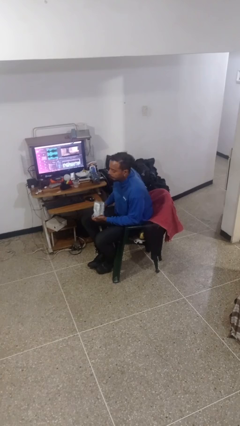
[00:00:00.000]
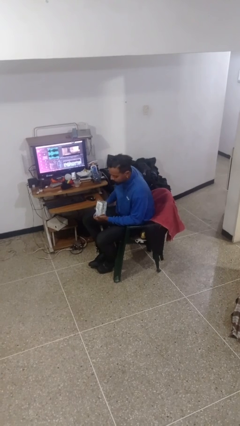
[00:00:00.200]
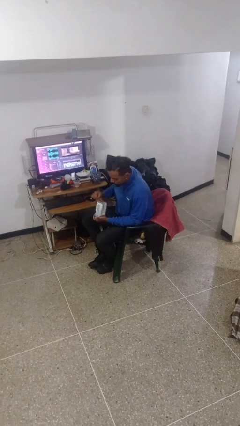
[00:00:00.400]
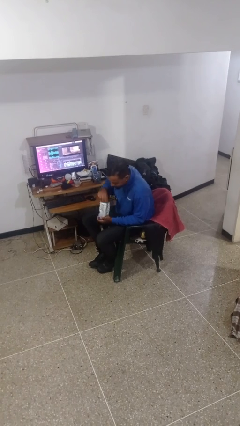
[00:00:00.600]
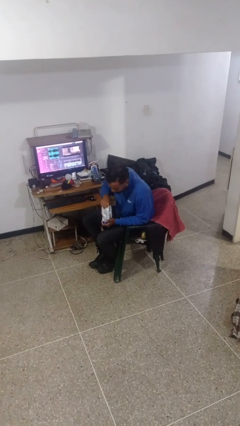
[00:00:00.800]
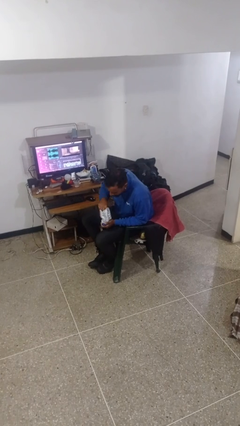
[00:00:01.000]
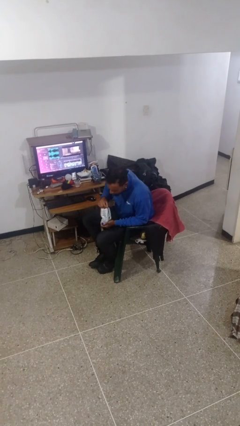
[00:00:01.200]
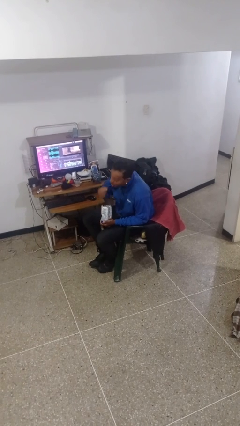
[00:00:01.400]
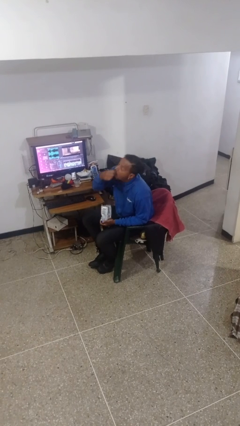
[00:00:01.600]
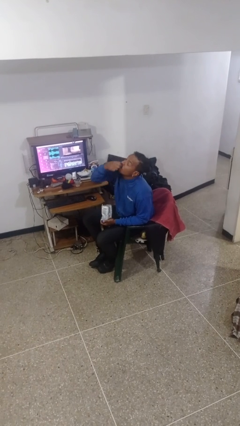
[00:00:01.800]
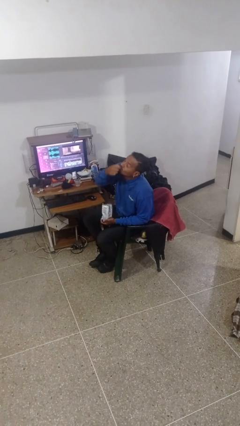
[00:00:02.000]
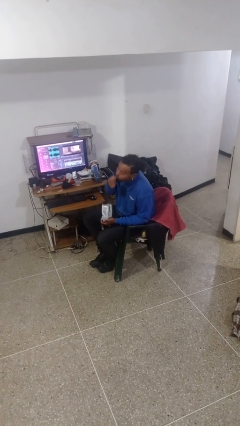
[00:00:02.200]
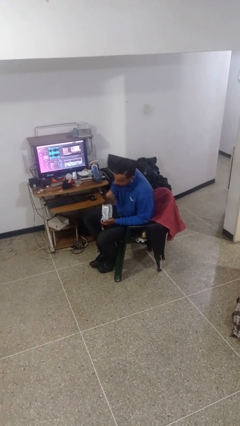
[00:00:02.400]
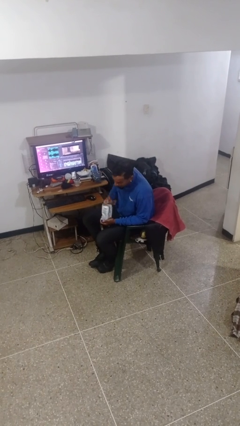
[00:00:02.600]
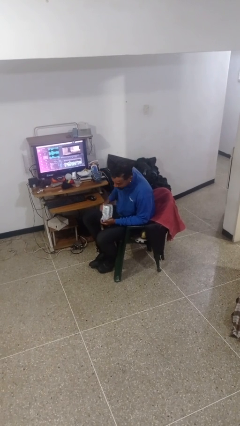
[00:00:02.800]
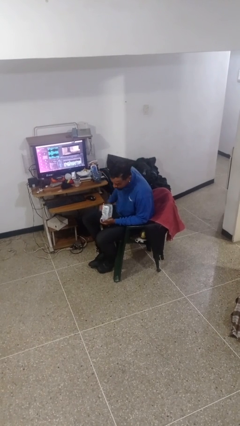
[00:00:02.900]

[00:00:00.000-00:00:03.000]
person eats snack from bag

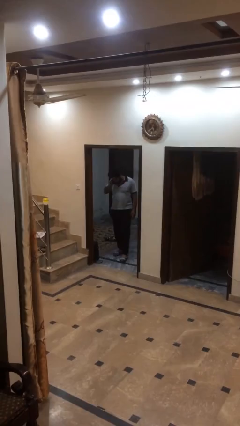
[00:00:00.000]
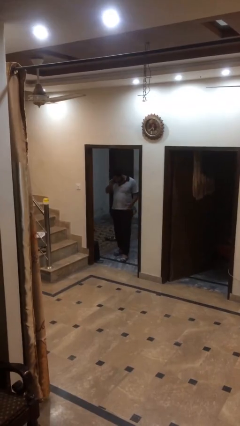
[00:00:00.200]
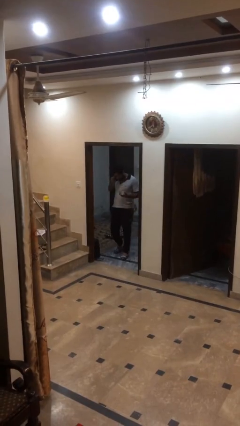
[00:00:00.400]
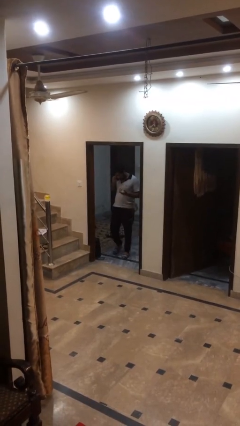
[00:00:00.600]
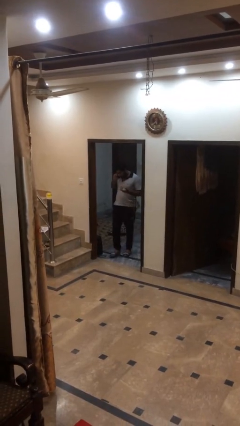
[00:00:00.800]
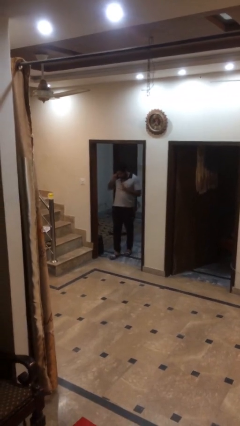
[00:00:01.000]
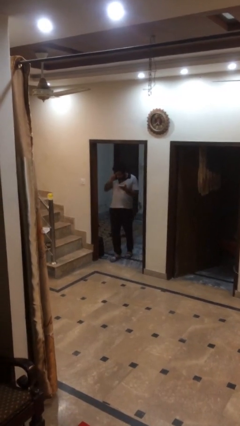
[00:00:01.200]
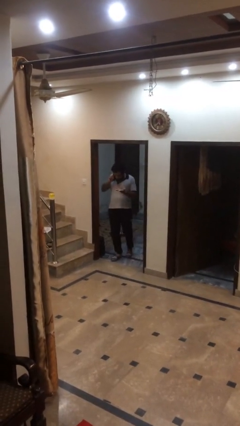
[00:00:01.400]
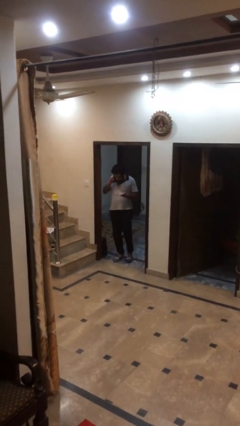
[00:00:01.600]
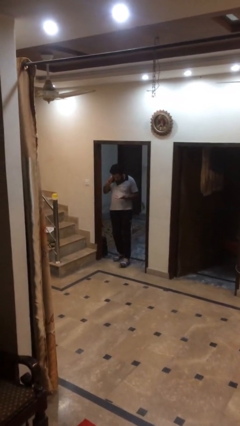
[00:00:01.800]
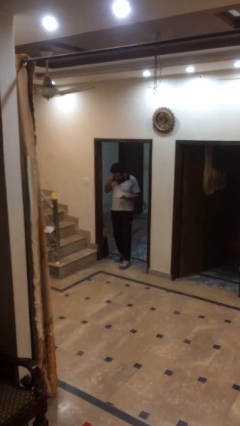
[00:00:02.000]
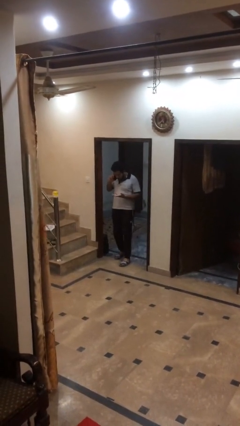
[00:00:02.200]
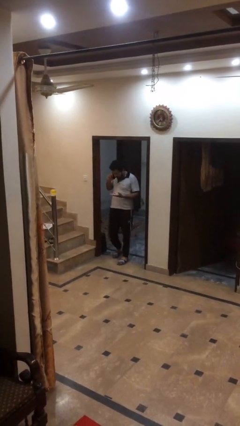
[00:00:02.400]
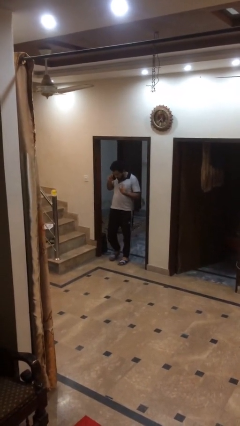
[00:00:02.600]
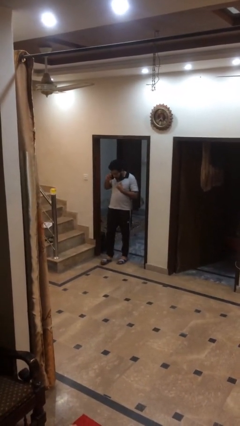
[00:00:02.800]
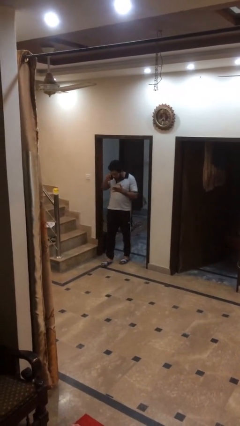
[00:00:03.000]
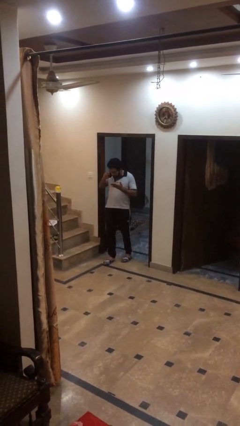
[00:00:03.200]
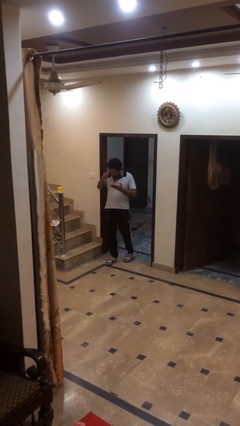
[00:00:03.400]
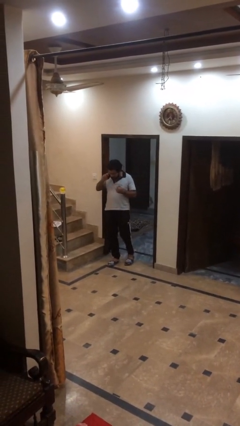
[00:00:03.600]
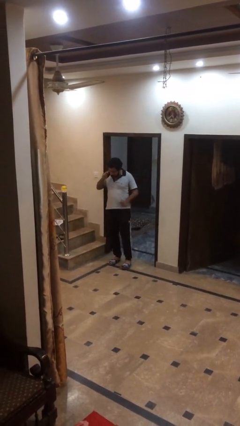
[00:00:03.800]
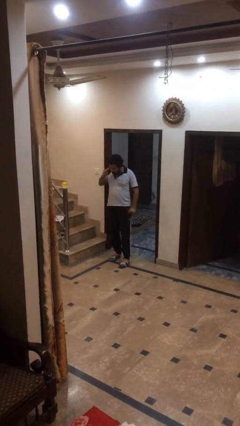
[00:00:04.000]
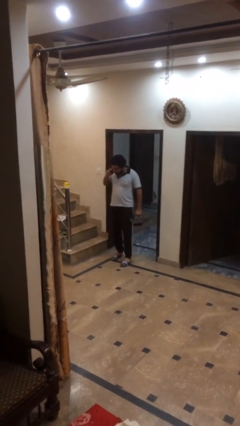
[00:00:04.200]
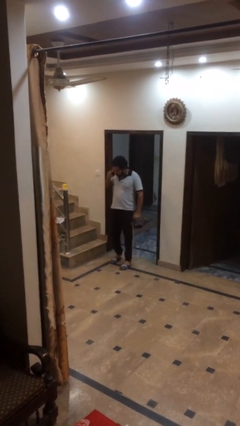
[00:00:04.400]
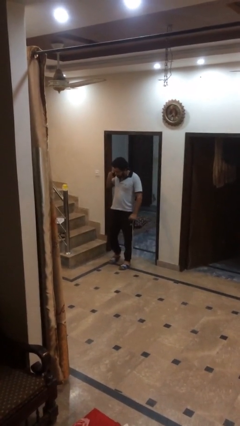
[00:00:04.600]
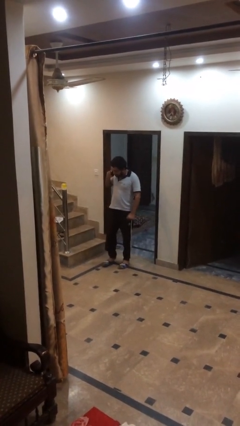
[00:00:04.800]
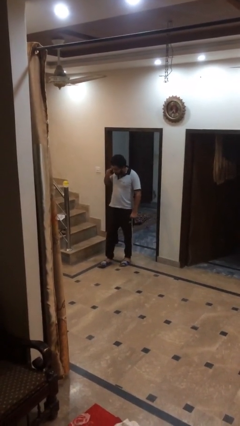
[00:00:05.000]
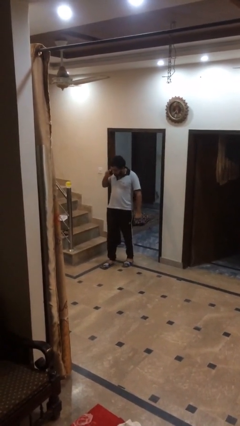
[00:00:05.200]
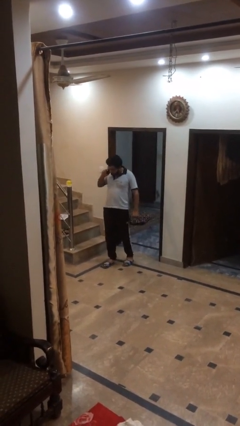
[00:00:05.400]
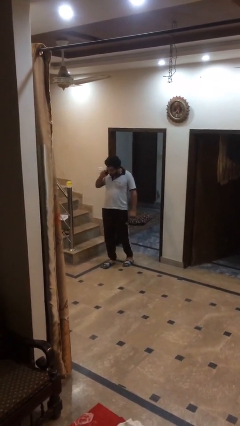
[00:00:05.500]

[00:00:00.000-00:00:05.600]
person enters scene through structure

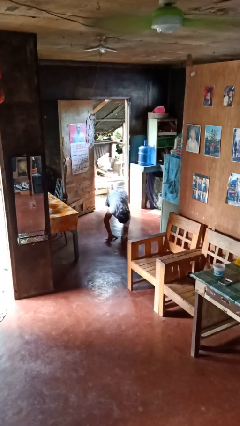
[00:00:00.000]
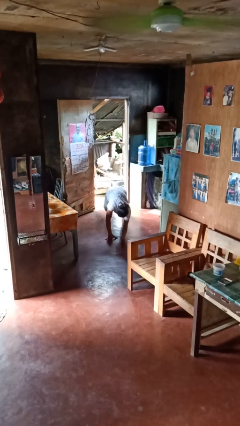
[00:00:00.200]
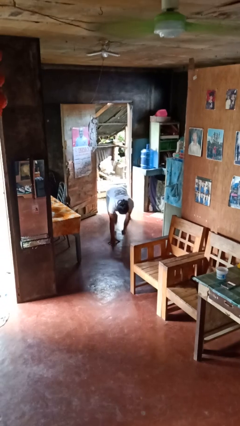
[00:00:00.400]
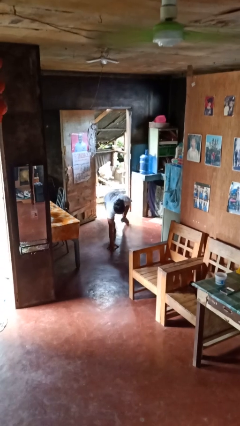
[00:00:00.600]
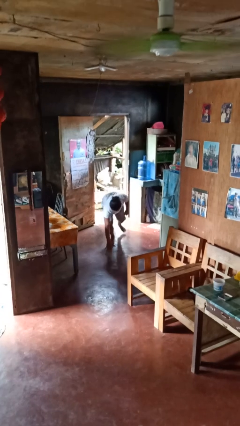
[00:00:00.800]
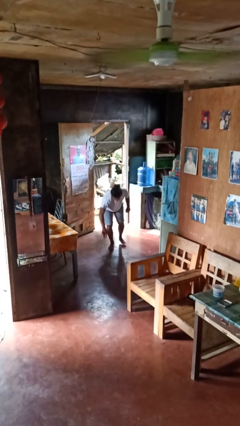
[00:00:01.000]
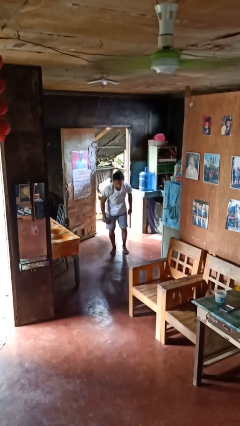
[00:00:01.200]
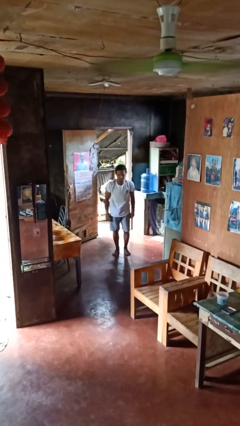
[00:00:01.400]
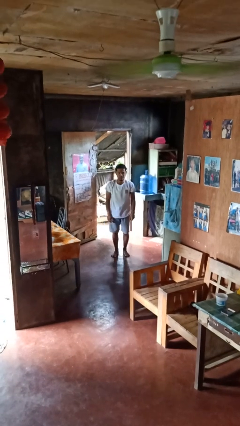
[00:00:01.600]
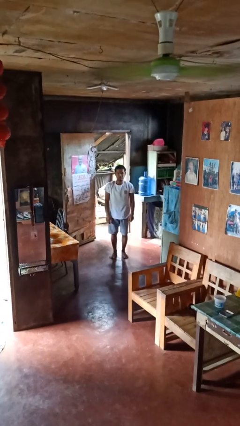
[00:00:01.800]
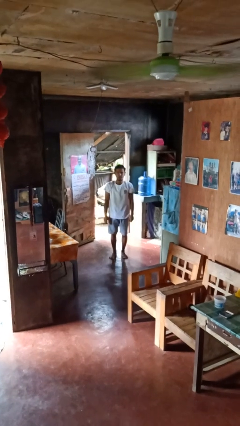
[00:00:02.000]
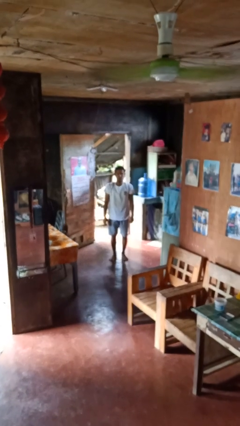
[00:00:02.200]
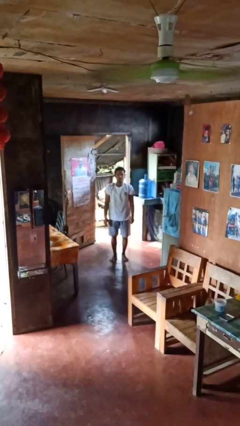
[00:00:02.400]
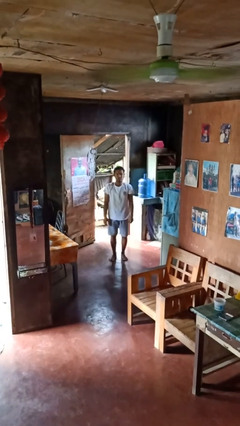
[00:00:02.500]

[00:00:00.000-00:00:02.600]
person stands up from floor

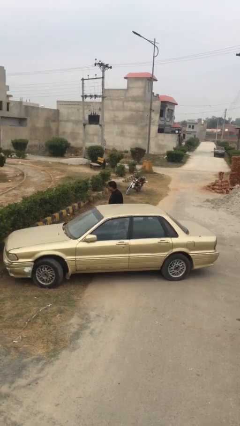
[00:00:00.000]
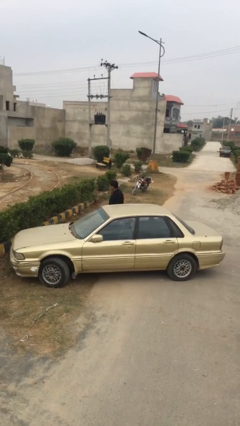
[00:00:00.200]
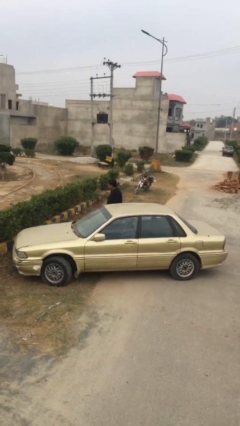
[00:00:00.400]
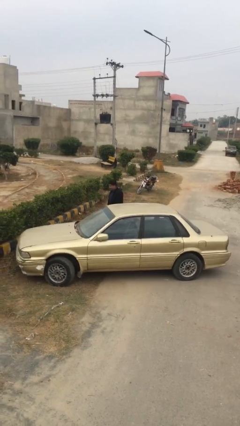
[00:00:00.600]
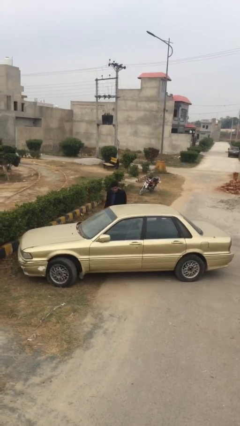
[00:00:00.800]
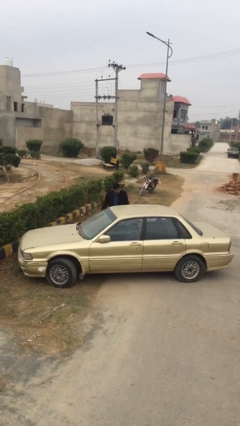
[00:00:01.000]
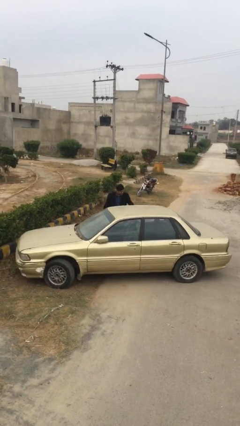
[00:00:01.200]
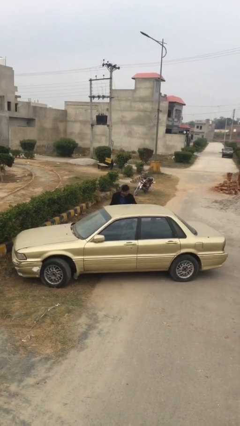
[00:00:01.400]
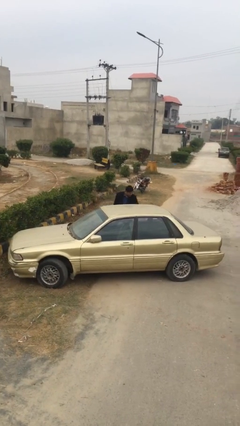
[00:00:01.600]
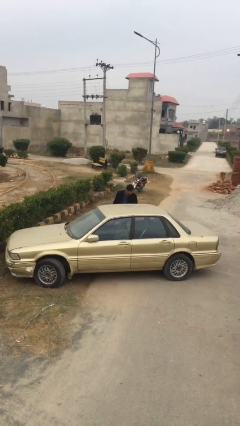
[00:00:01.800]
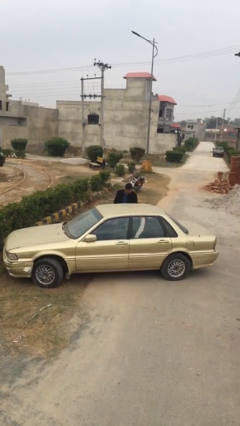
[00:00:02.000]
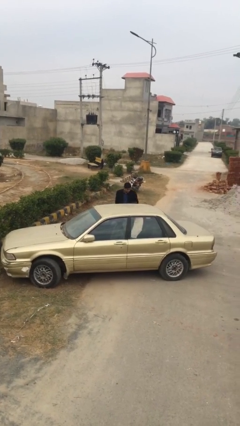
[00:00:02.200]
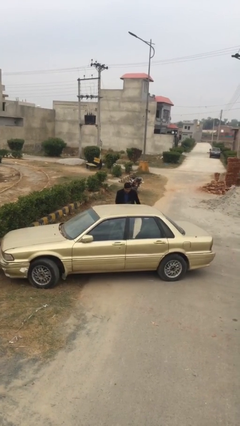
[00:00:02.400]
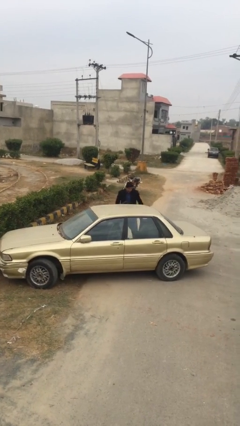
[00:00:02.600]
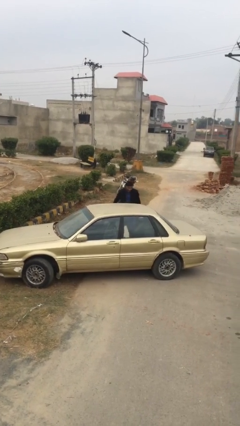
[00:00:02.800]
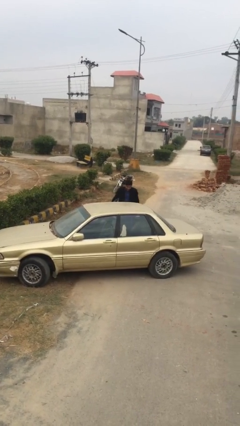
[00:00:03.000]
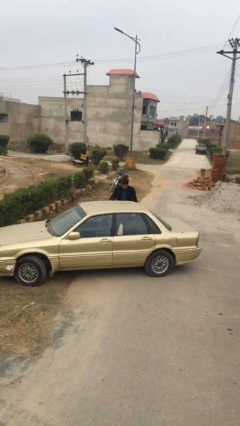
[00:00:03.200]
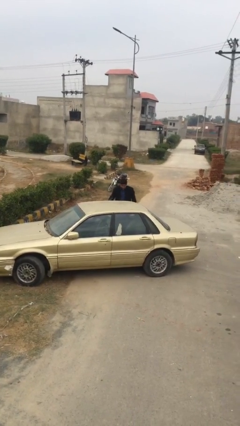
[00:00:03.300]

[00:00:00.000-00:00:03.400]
person opens car door

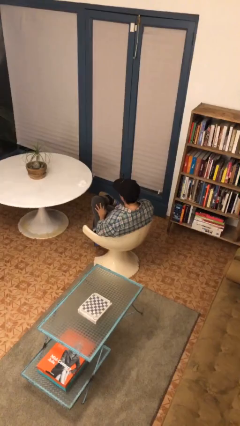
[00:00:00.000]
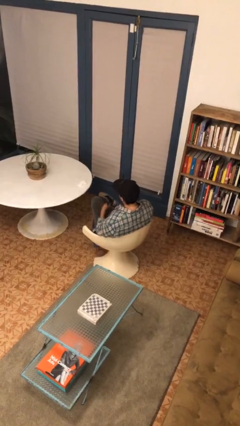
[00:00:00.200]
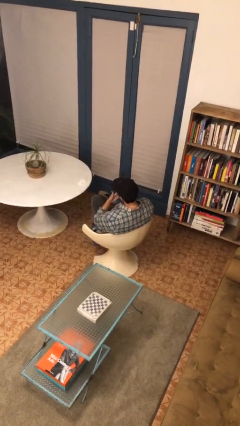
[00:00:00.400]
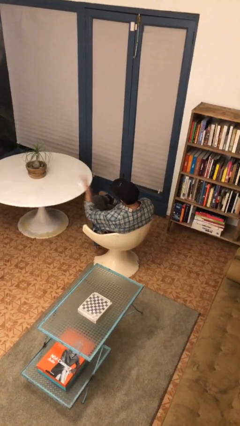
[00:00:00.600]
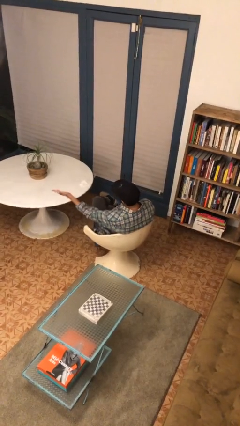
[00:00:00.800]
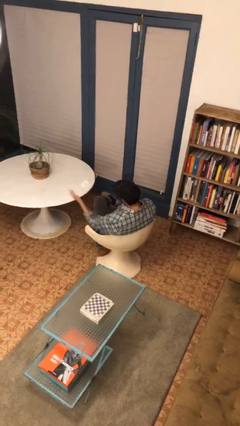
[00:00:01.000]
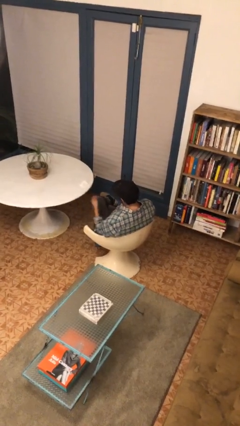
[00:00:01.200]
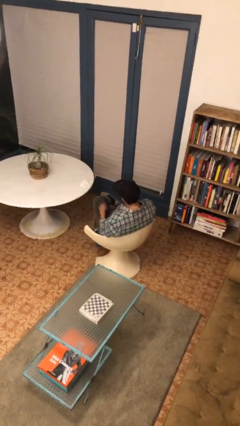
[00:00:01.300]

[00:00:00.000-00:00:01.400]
person gestures blow kiss

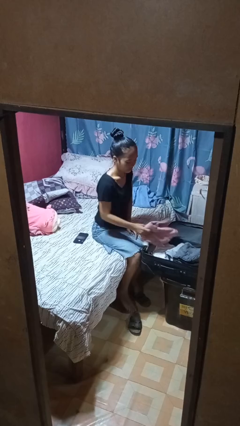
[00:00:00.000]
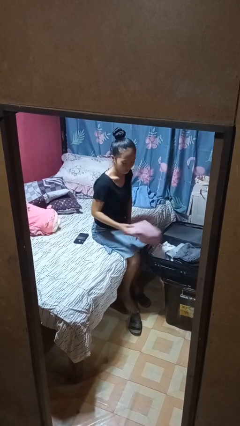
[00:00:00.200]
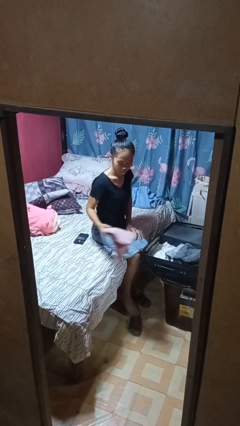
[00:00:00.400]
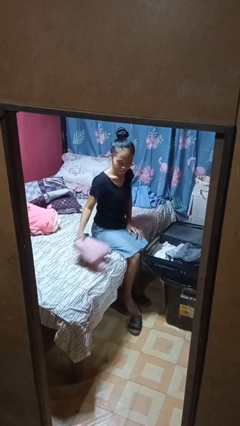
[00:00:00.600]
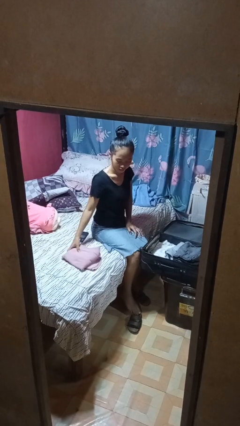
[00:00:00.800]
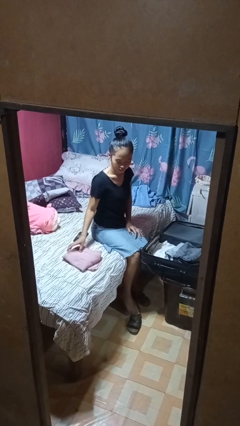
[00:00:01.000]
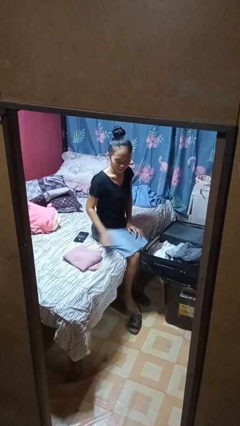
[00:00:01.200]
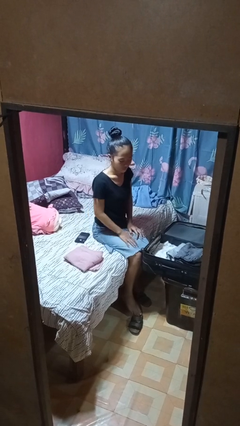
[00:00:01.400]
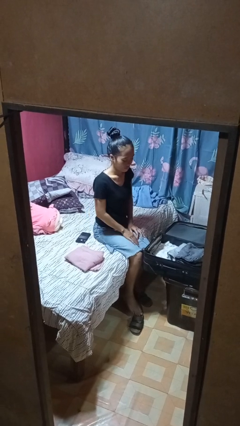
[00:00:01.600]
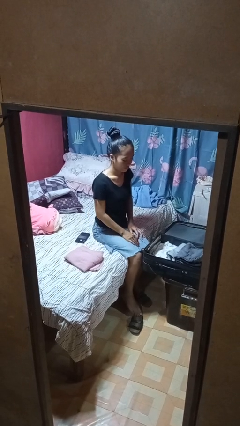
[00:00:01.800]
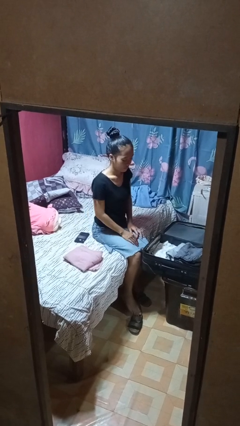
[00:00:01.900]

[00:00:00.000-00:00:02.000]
person unloads clothes from suitcase
